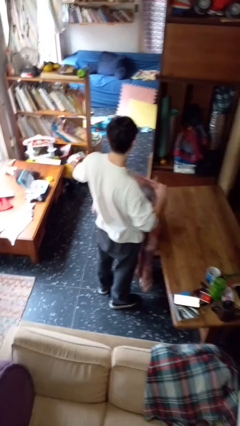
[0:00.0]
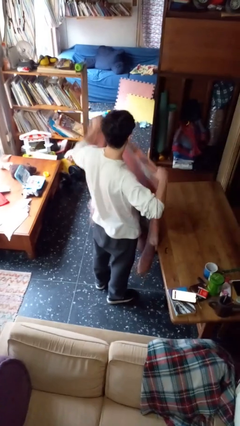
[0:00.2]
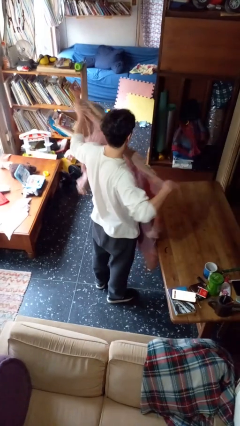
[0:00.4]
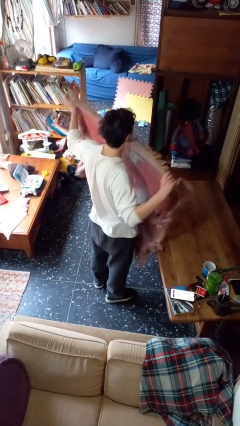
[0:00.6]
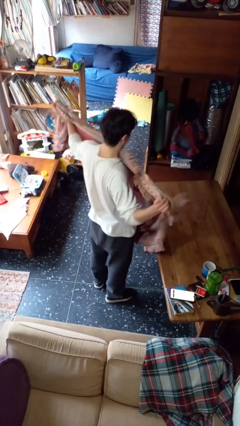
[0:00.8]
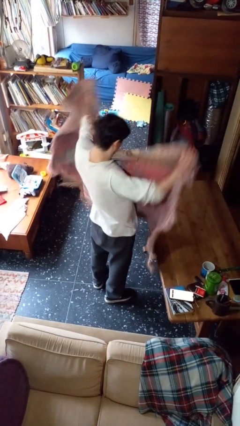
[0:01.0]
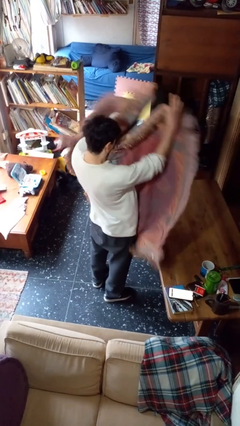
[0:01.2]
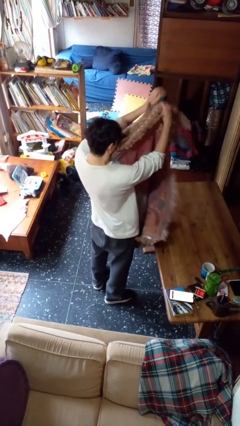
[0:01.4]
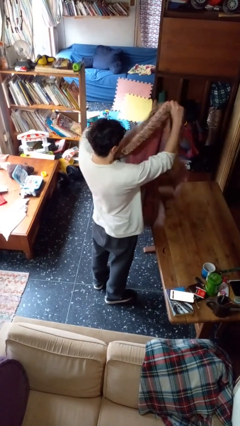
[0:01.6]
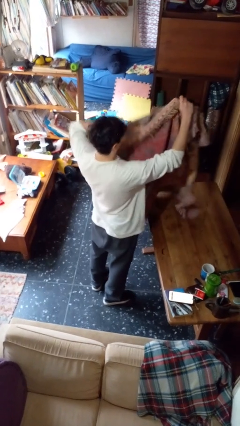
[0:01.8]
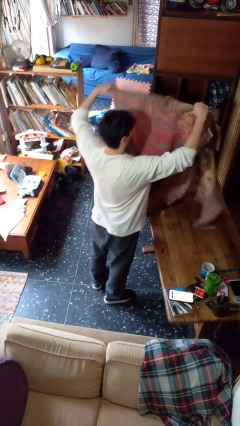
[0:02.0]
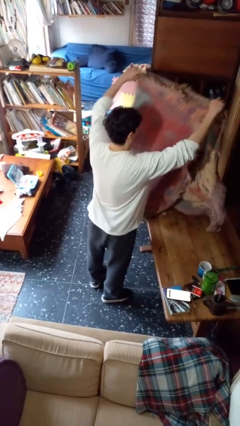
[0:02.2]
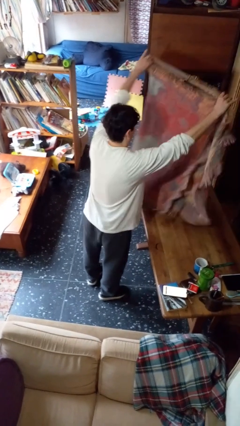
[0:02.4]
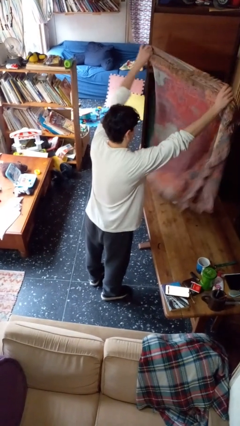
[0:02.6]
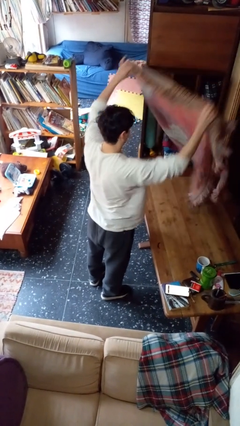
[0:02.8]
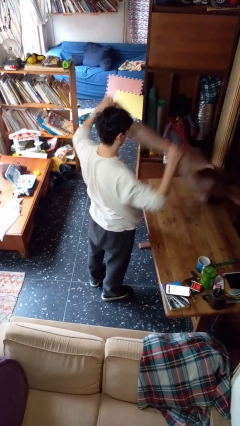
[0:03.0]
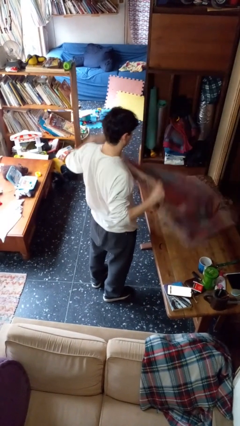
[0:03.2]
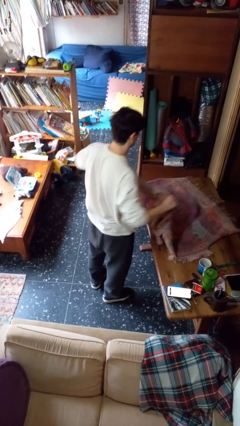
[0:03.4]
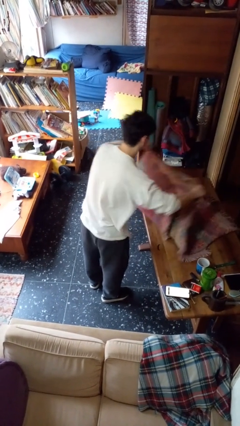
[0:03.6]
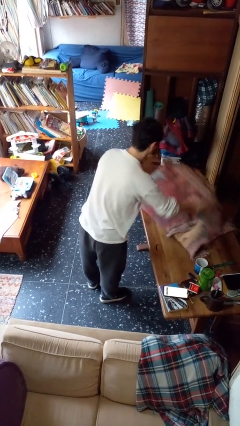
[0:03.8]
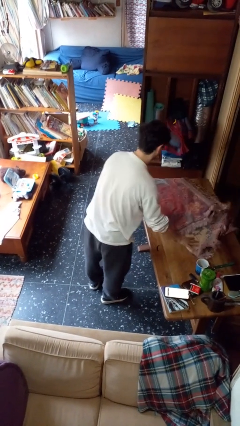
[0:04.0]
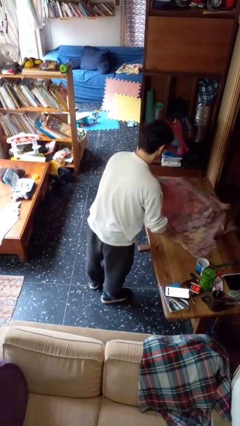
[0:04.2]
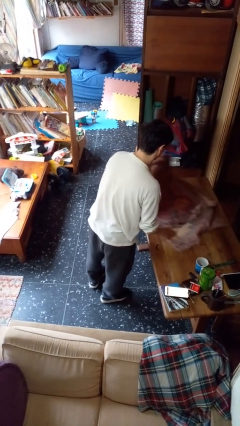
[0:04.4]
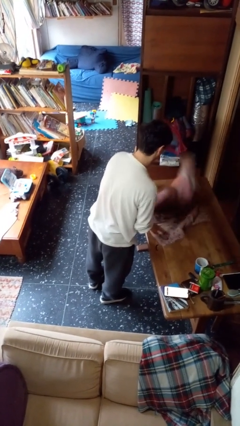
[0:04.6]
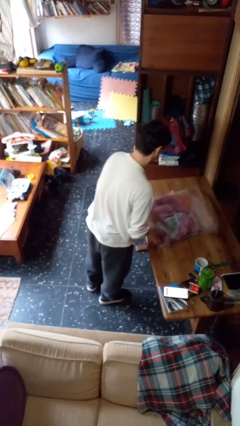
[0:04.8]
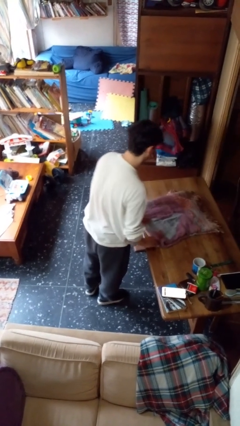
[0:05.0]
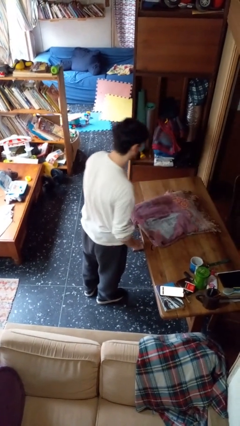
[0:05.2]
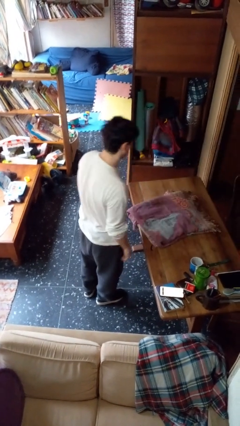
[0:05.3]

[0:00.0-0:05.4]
person folds blanket

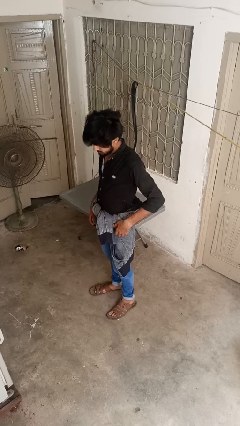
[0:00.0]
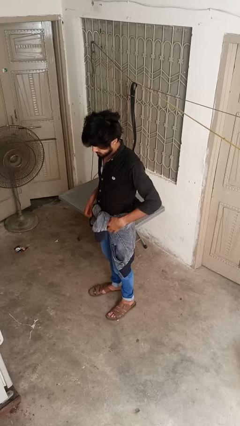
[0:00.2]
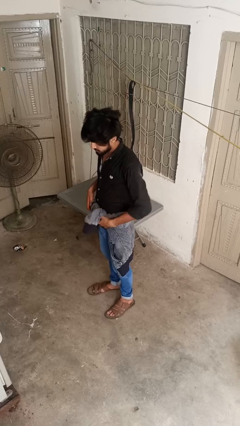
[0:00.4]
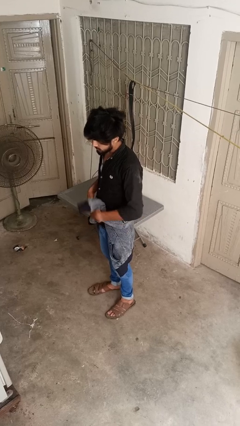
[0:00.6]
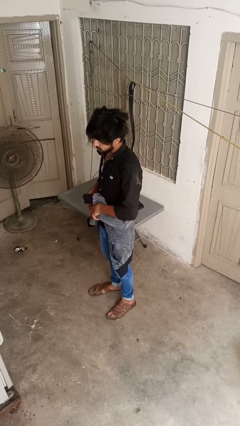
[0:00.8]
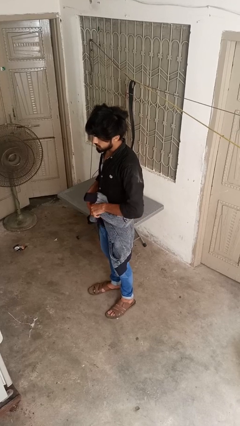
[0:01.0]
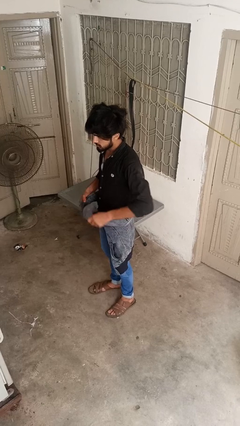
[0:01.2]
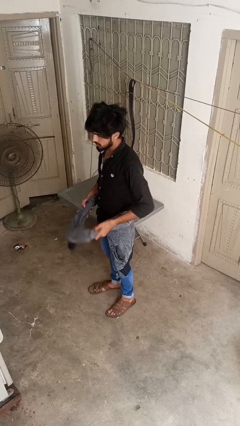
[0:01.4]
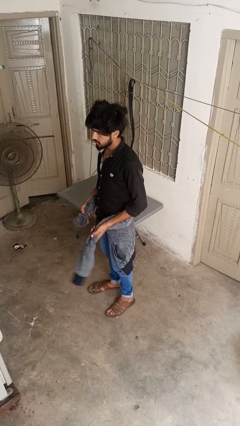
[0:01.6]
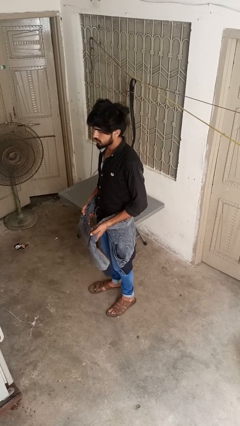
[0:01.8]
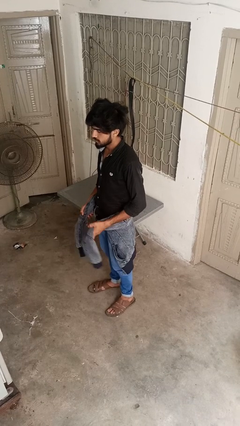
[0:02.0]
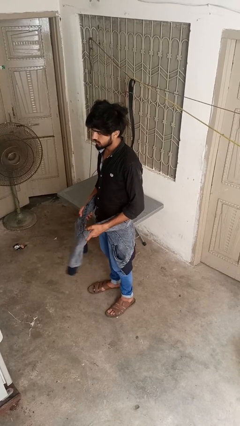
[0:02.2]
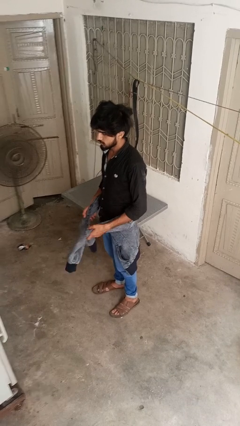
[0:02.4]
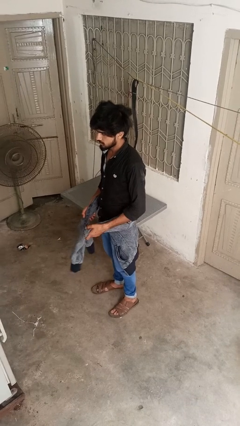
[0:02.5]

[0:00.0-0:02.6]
person unties jacket around waist

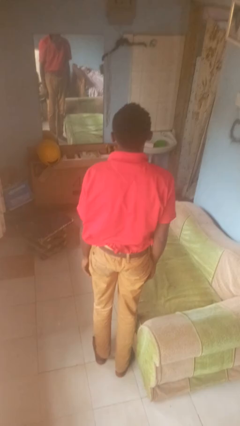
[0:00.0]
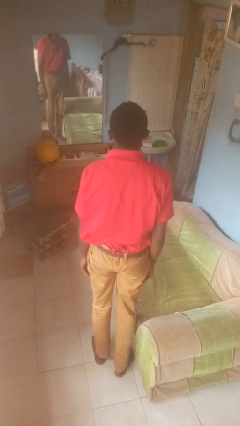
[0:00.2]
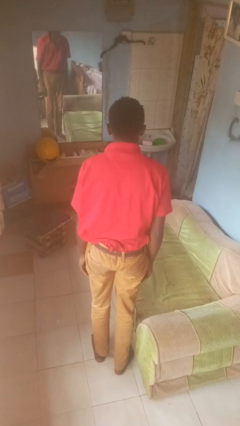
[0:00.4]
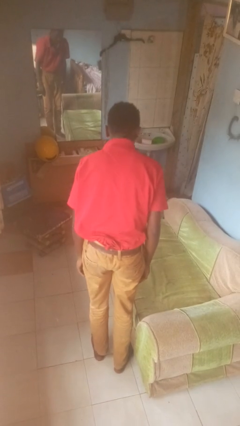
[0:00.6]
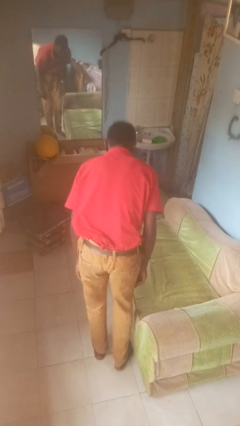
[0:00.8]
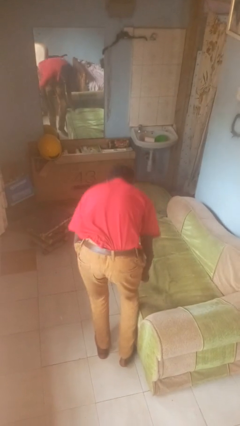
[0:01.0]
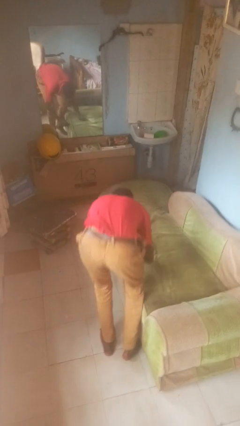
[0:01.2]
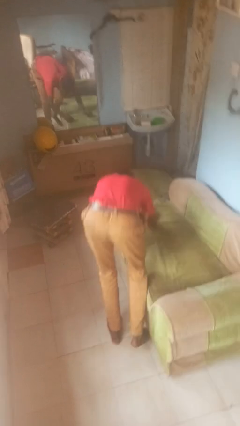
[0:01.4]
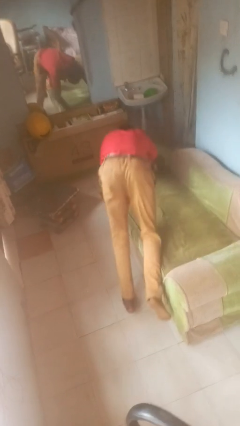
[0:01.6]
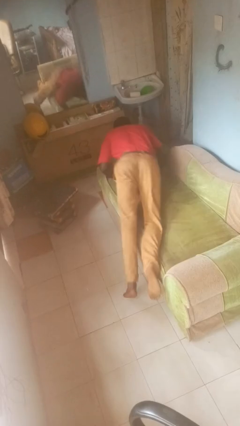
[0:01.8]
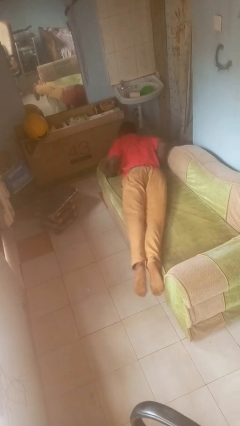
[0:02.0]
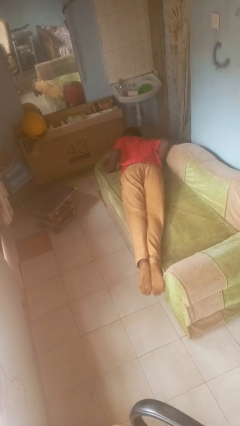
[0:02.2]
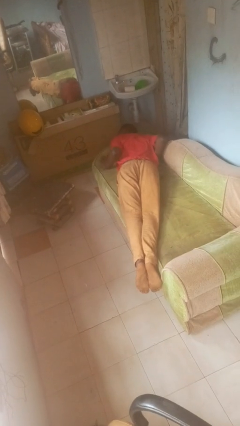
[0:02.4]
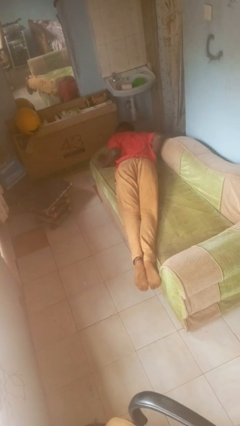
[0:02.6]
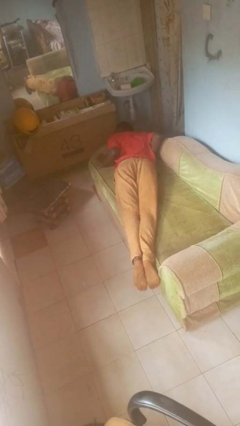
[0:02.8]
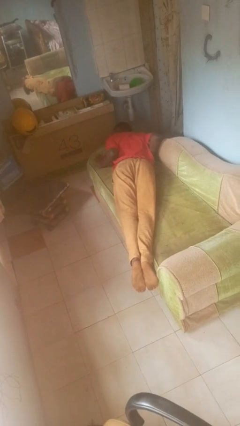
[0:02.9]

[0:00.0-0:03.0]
person lies down on couch

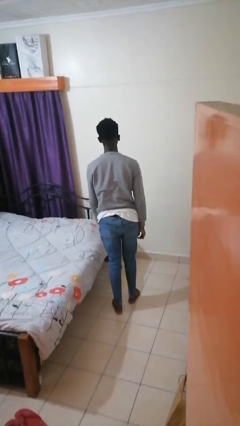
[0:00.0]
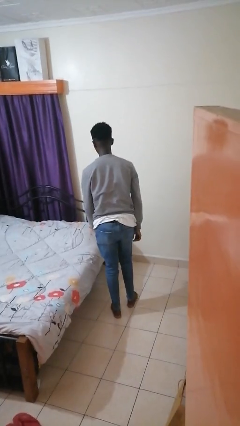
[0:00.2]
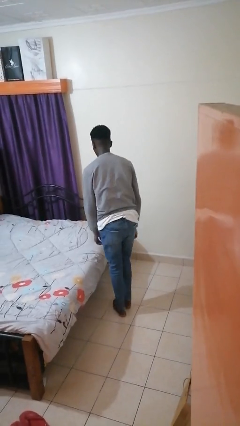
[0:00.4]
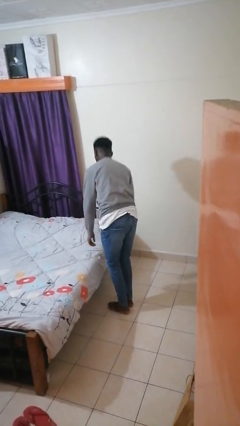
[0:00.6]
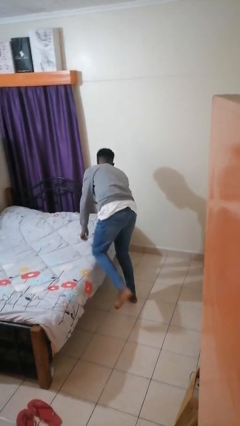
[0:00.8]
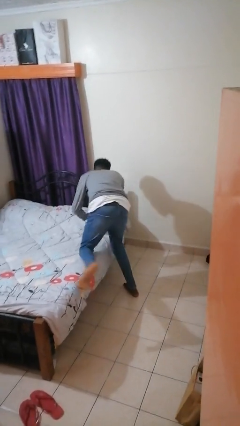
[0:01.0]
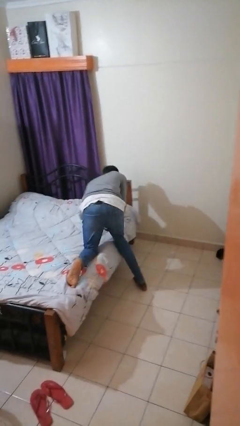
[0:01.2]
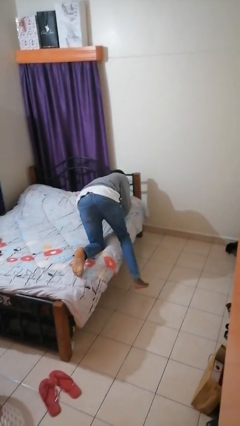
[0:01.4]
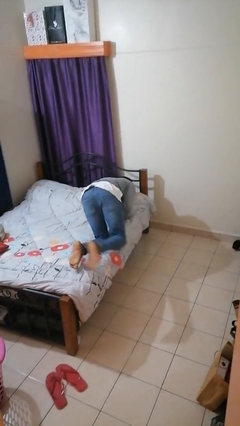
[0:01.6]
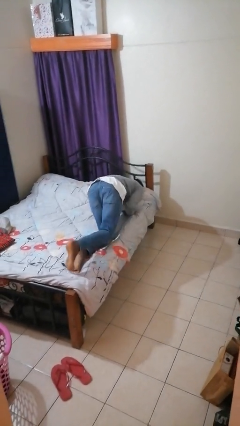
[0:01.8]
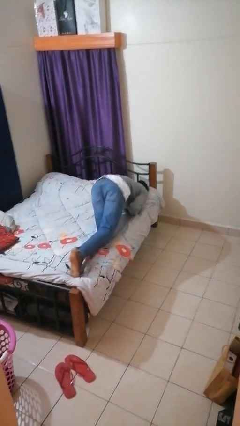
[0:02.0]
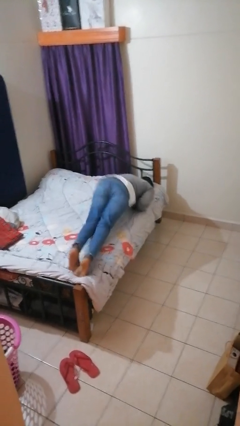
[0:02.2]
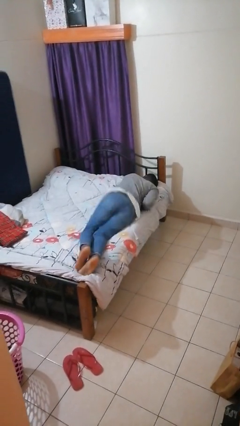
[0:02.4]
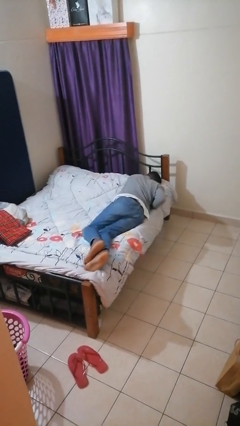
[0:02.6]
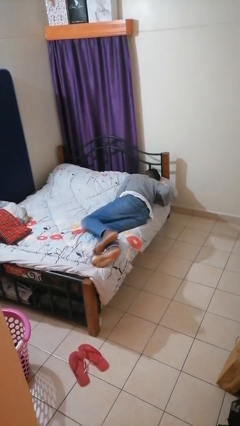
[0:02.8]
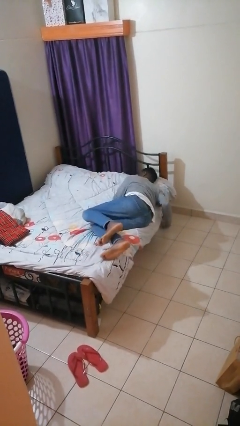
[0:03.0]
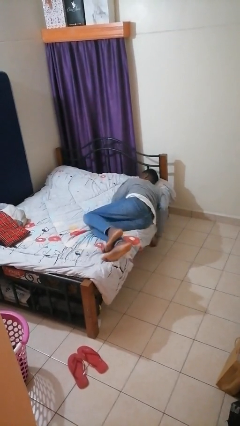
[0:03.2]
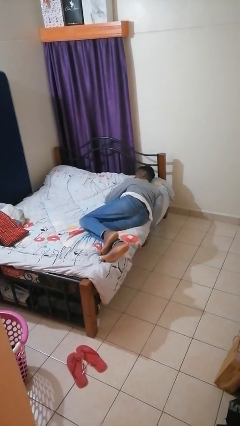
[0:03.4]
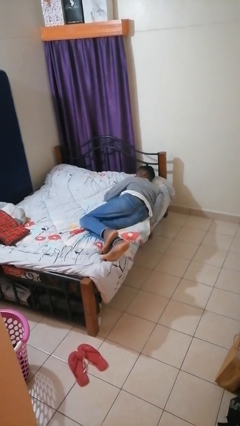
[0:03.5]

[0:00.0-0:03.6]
person lies down on bed

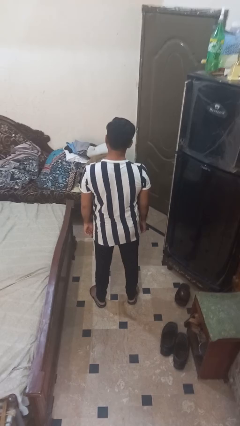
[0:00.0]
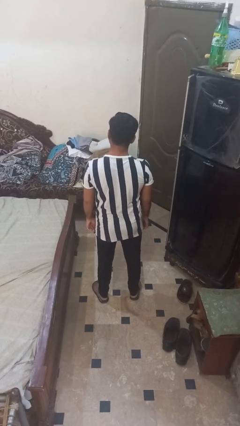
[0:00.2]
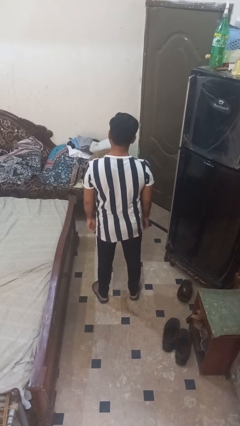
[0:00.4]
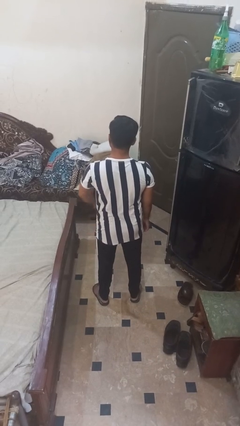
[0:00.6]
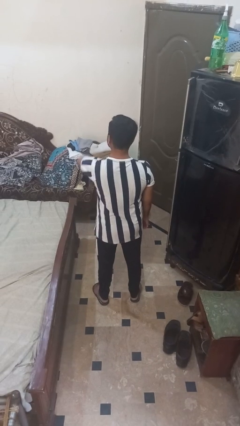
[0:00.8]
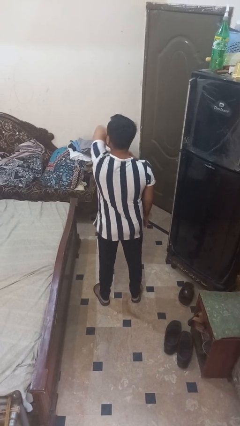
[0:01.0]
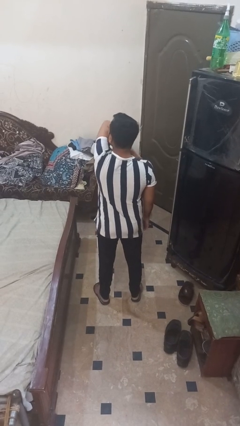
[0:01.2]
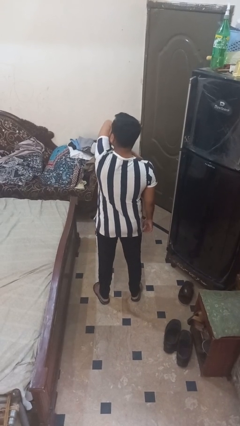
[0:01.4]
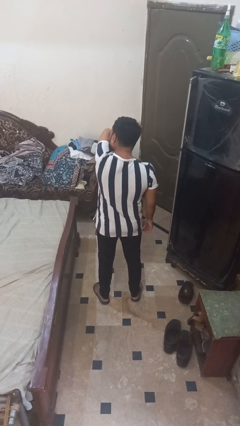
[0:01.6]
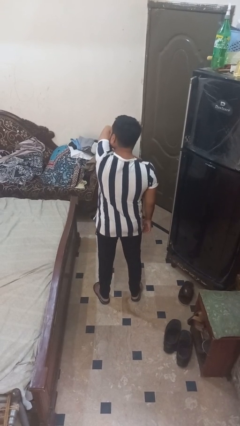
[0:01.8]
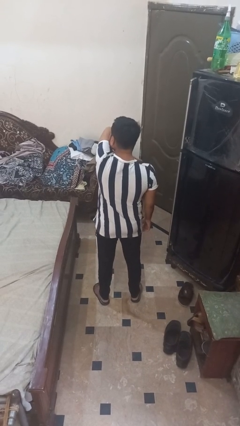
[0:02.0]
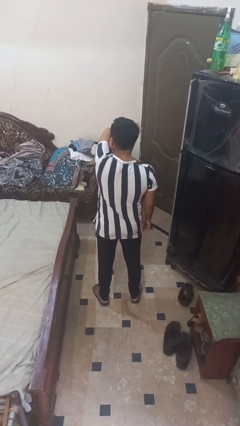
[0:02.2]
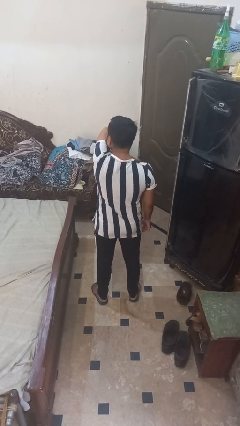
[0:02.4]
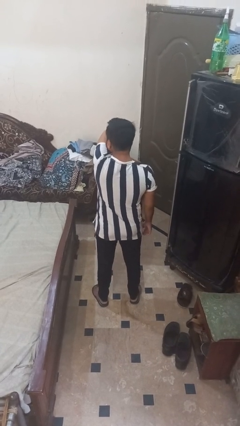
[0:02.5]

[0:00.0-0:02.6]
person sneezes into arm

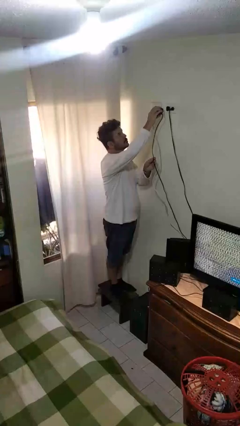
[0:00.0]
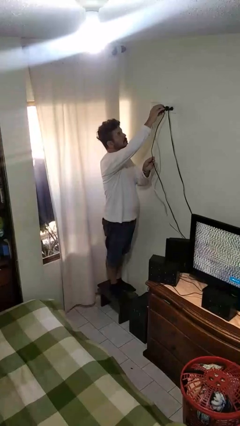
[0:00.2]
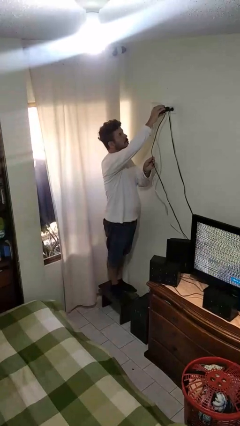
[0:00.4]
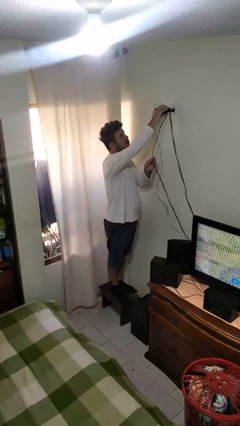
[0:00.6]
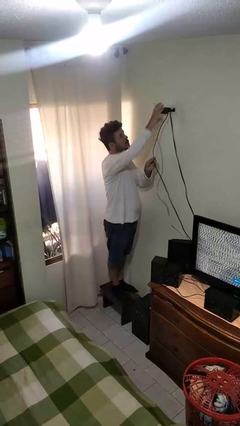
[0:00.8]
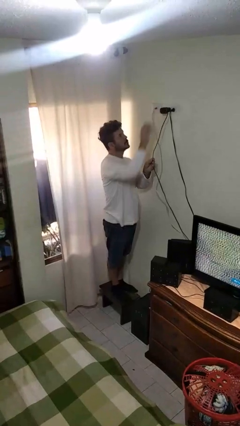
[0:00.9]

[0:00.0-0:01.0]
person plugs into electrical socket
